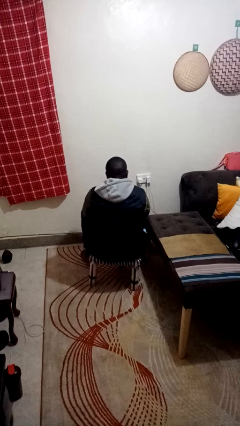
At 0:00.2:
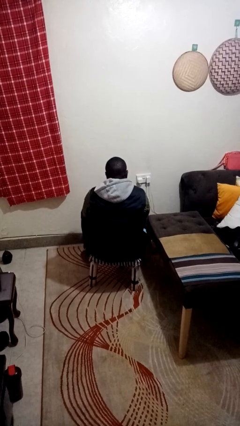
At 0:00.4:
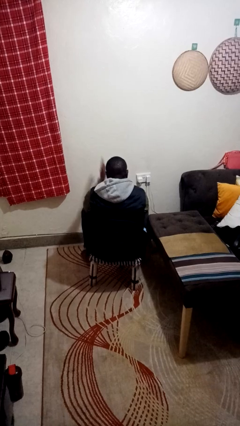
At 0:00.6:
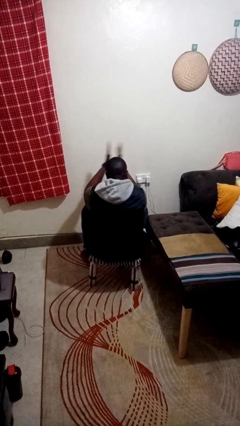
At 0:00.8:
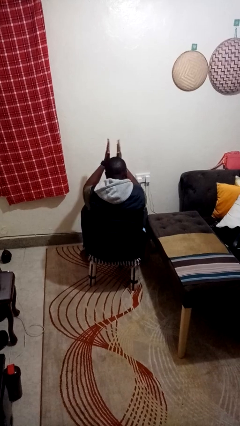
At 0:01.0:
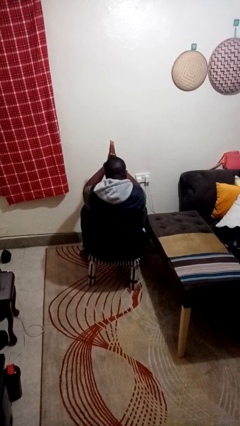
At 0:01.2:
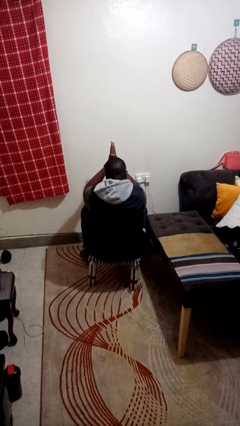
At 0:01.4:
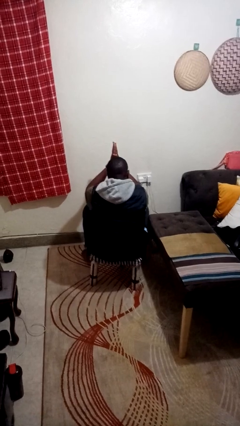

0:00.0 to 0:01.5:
person claps hands

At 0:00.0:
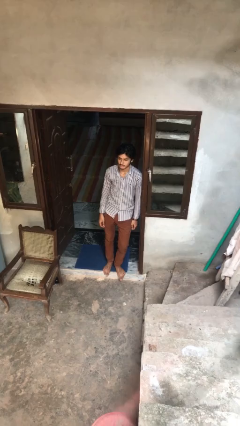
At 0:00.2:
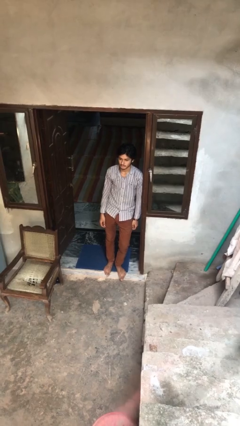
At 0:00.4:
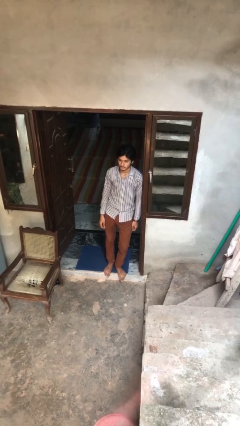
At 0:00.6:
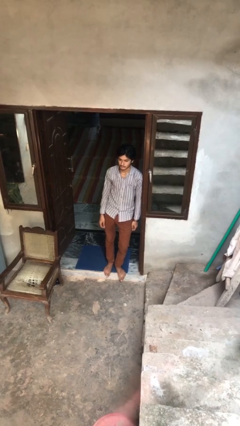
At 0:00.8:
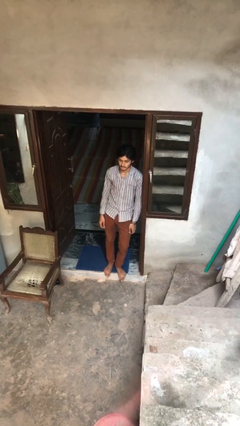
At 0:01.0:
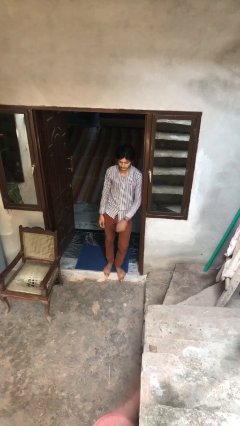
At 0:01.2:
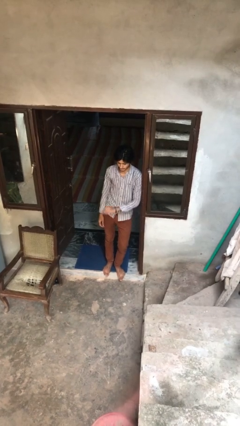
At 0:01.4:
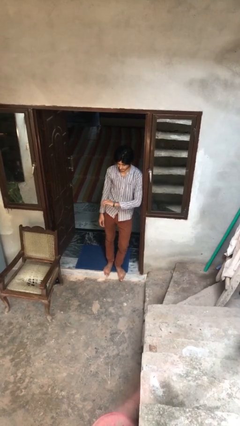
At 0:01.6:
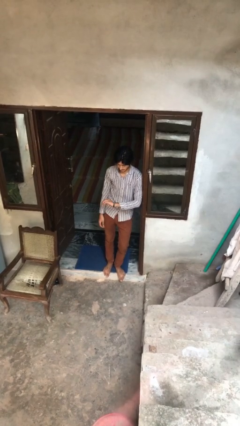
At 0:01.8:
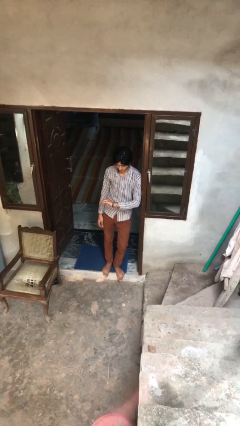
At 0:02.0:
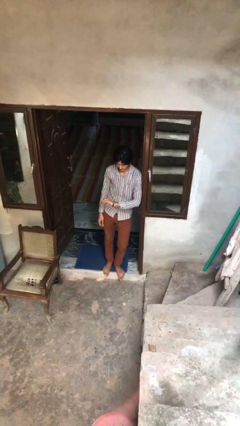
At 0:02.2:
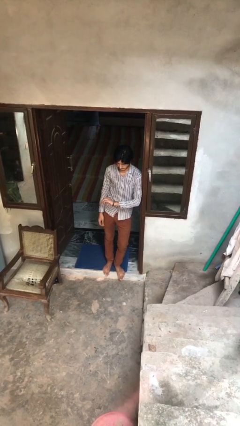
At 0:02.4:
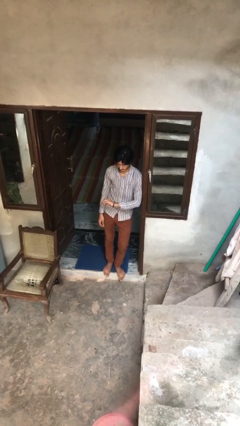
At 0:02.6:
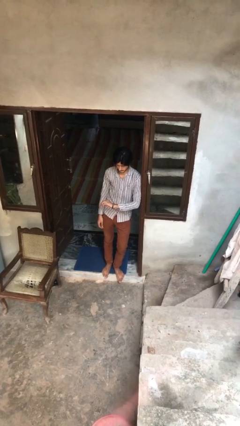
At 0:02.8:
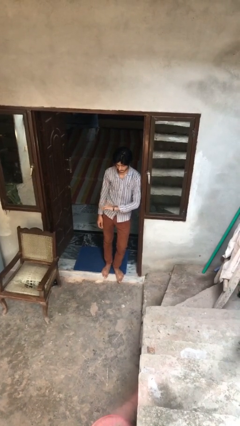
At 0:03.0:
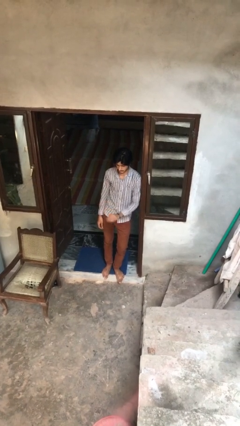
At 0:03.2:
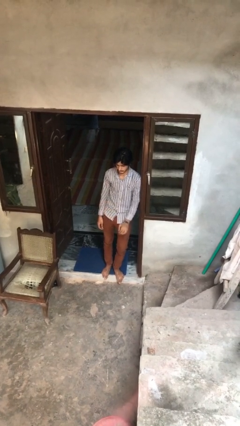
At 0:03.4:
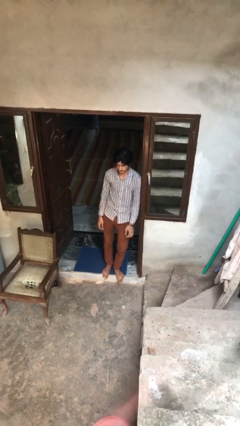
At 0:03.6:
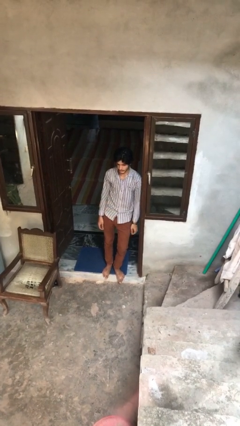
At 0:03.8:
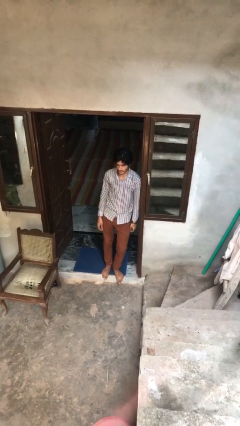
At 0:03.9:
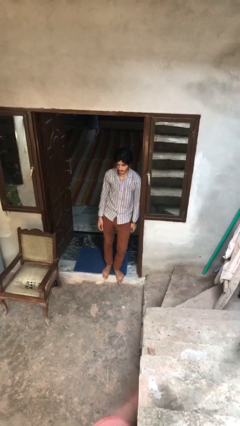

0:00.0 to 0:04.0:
person looks at wristwatch

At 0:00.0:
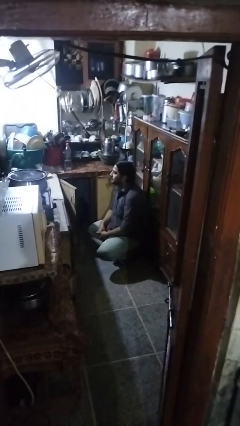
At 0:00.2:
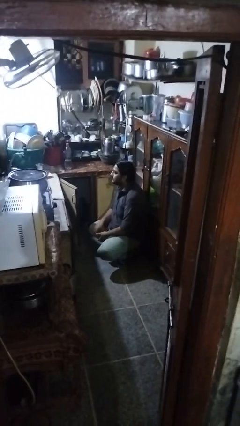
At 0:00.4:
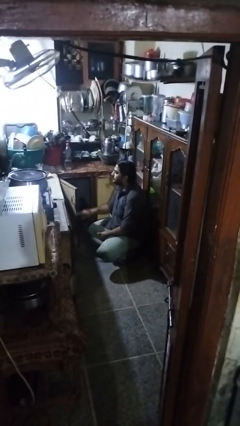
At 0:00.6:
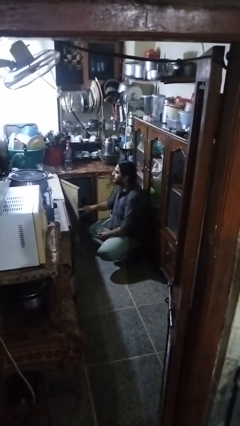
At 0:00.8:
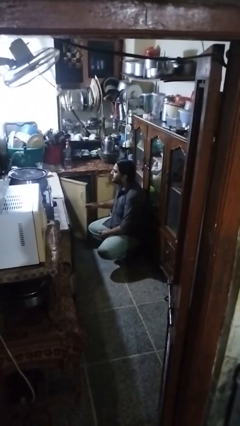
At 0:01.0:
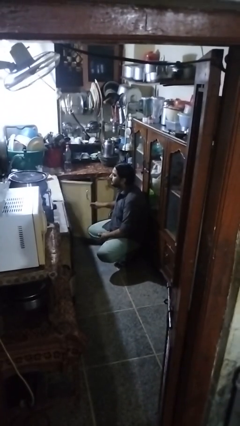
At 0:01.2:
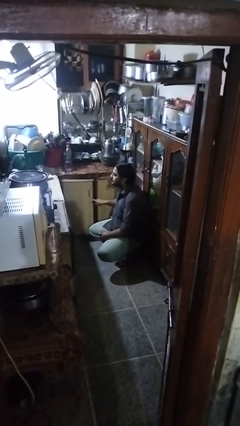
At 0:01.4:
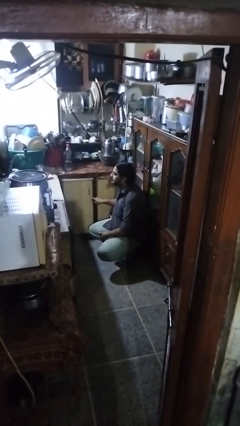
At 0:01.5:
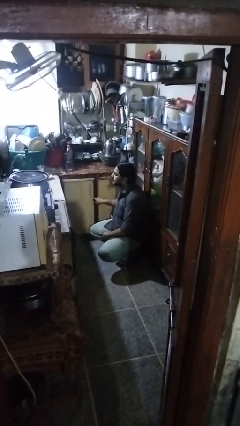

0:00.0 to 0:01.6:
person opens cabinet

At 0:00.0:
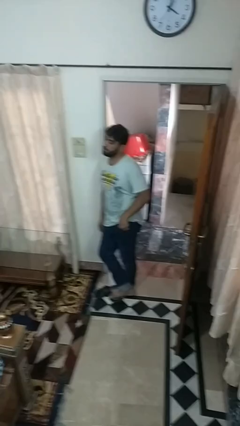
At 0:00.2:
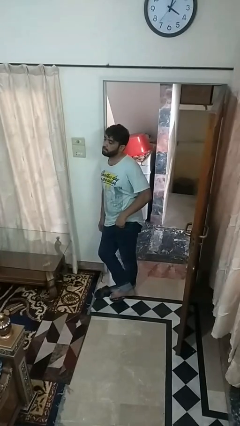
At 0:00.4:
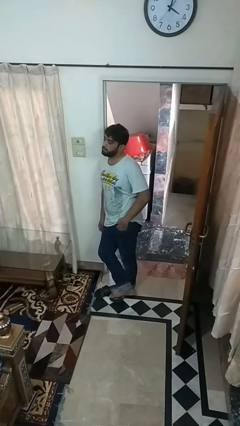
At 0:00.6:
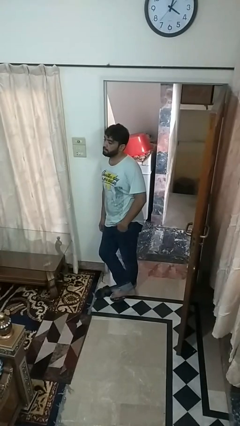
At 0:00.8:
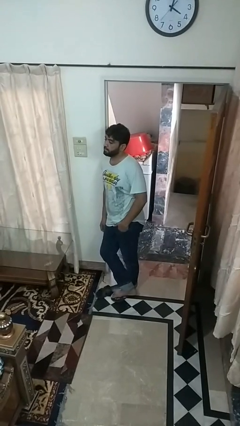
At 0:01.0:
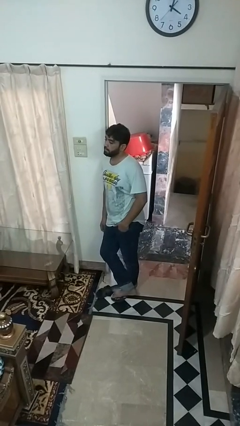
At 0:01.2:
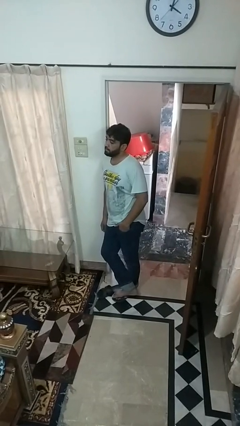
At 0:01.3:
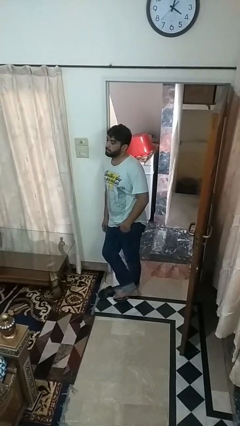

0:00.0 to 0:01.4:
person puts hands in back pockets

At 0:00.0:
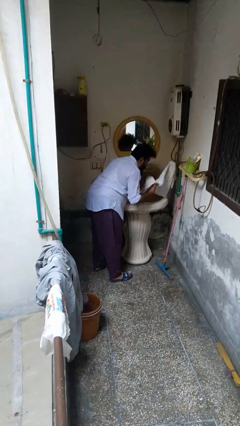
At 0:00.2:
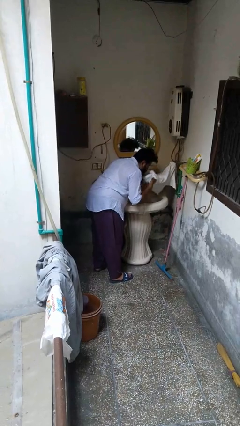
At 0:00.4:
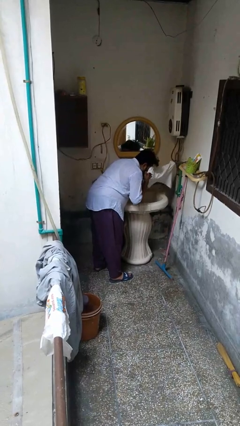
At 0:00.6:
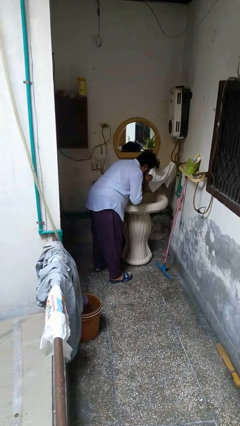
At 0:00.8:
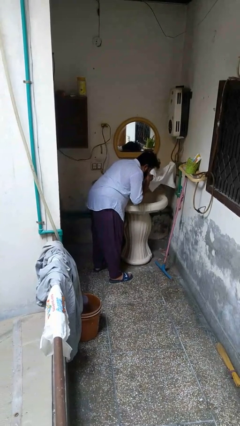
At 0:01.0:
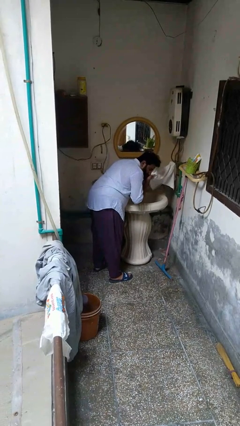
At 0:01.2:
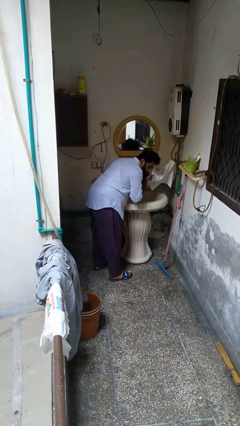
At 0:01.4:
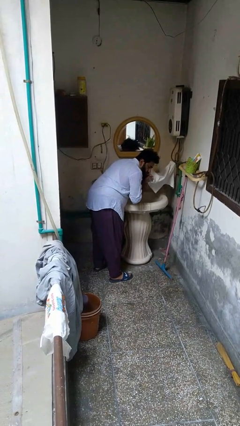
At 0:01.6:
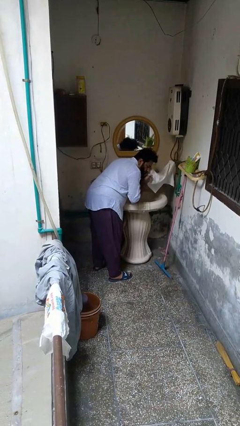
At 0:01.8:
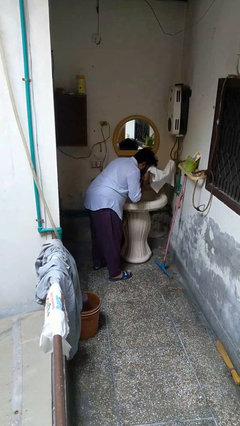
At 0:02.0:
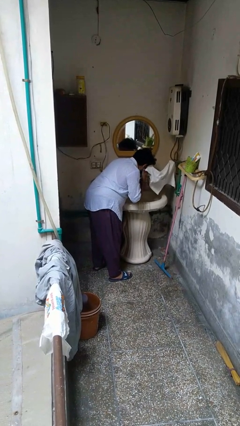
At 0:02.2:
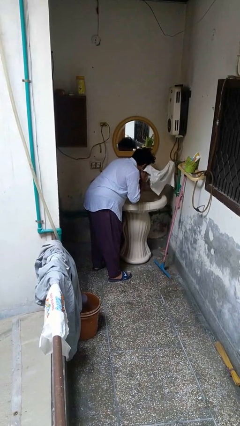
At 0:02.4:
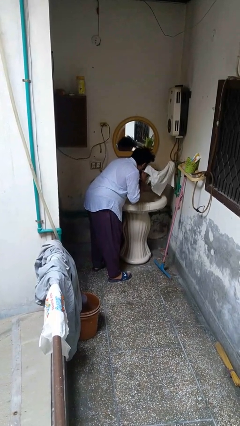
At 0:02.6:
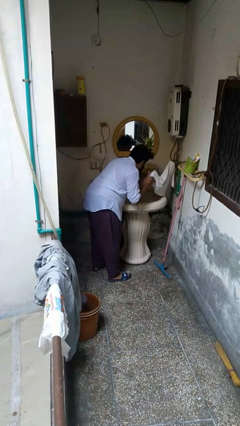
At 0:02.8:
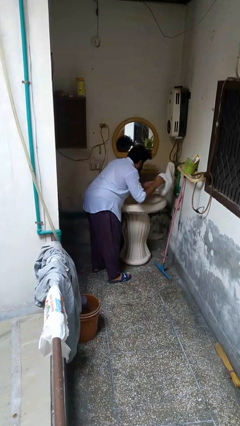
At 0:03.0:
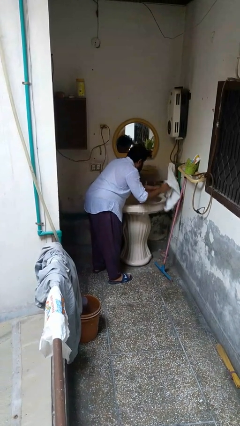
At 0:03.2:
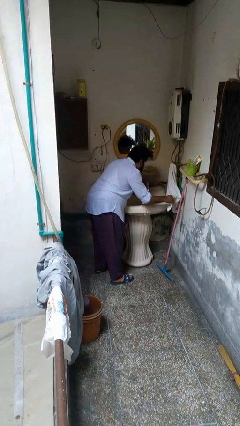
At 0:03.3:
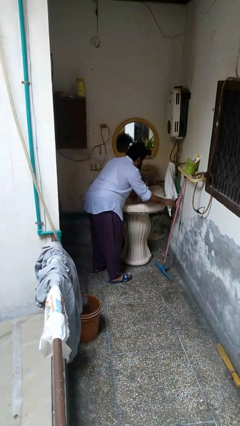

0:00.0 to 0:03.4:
person dries face with towel

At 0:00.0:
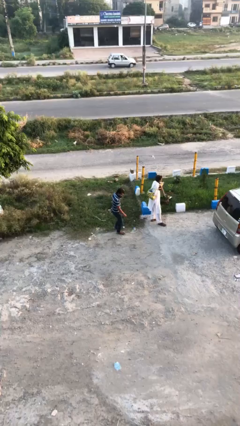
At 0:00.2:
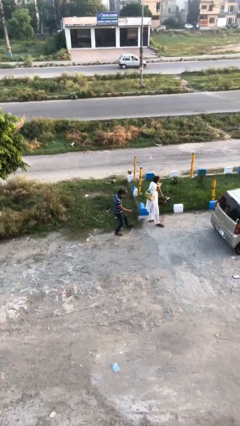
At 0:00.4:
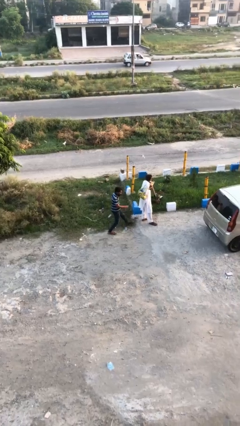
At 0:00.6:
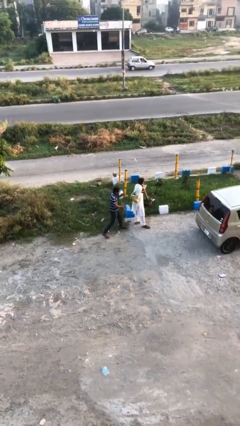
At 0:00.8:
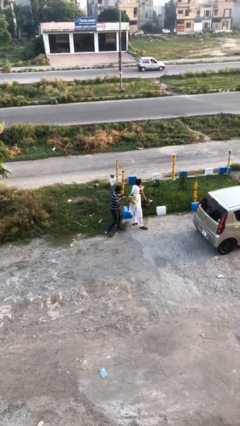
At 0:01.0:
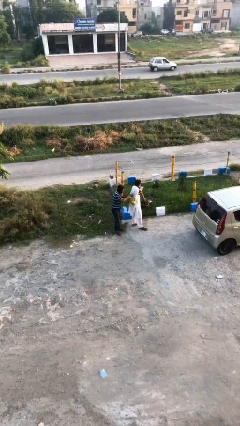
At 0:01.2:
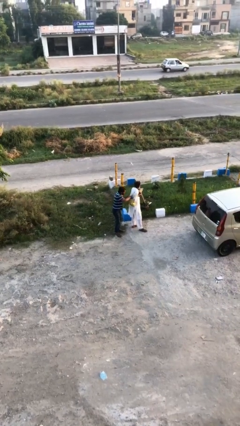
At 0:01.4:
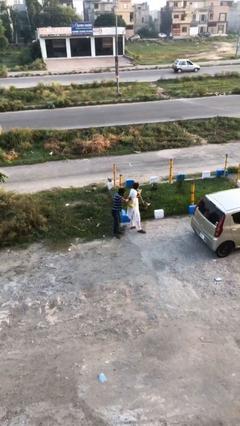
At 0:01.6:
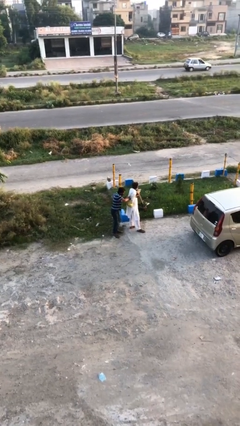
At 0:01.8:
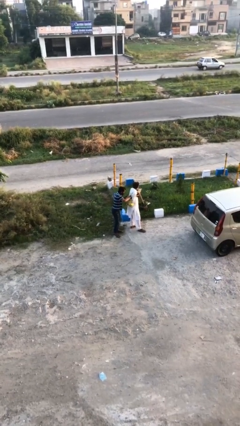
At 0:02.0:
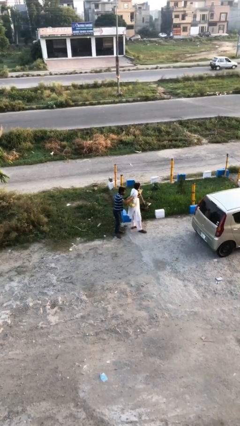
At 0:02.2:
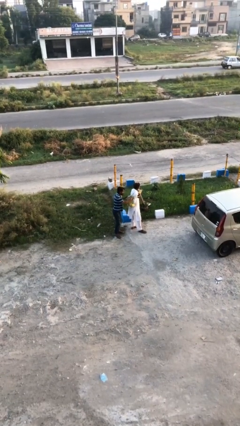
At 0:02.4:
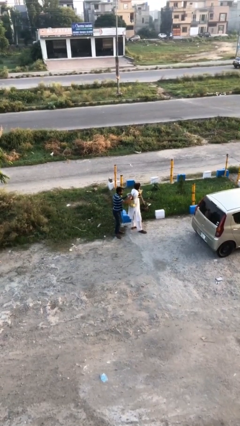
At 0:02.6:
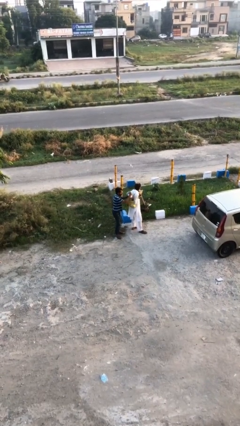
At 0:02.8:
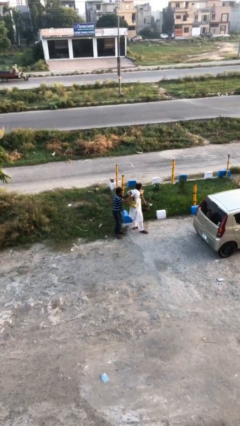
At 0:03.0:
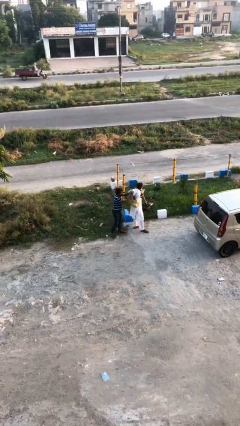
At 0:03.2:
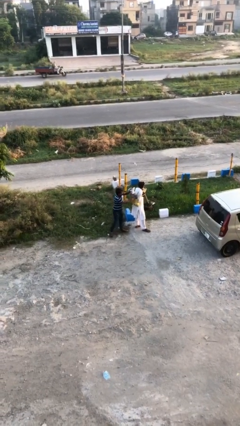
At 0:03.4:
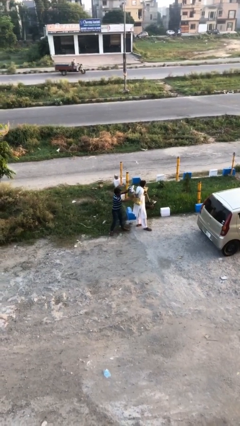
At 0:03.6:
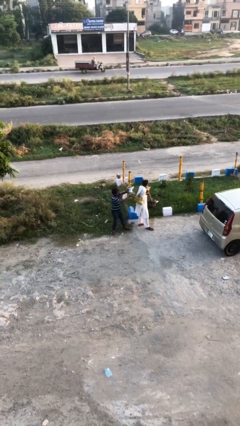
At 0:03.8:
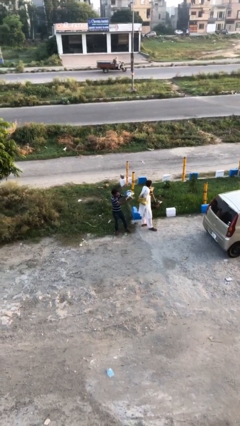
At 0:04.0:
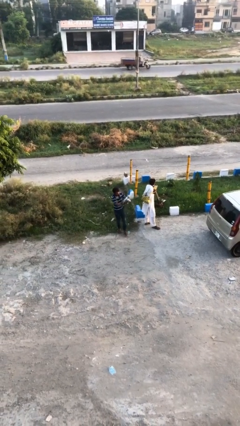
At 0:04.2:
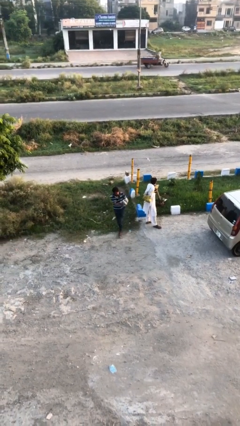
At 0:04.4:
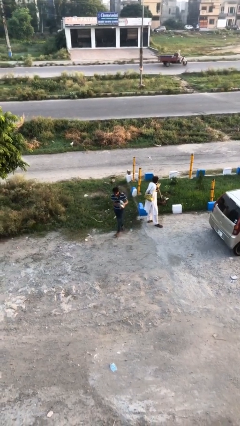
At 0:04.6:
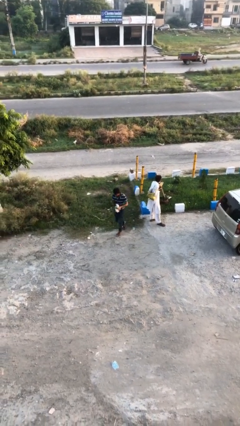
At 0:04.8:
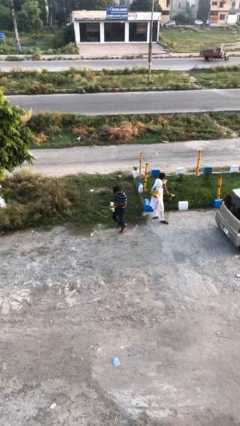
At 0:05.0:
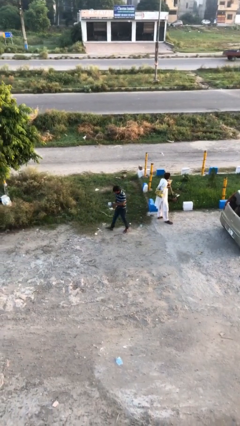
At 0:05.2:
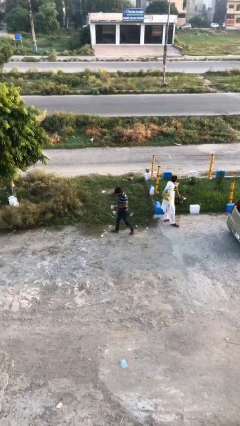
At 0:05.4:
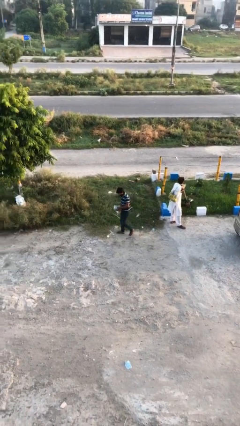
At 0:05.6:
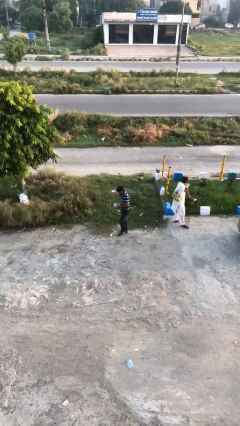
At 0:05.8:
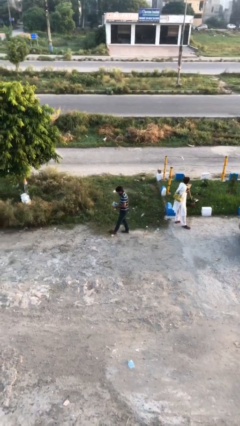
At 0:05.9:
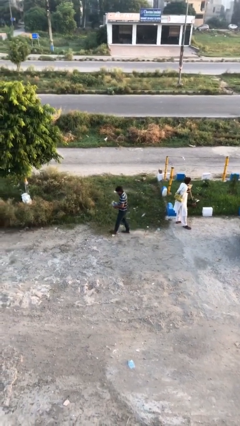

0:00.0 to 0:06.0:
person steals object from person
